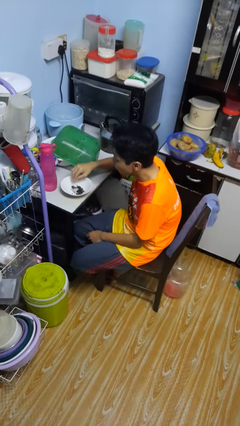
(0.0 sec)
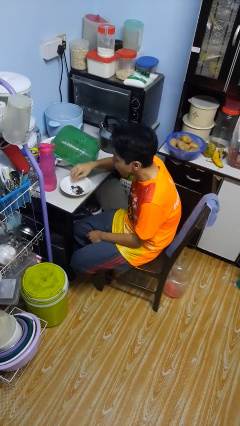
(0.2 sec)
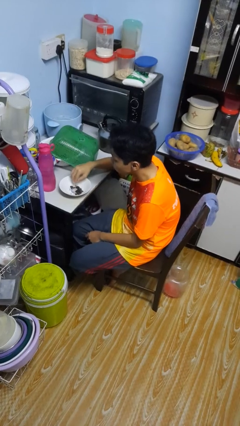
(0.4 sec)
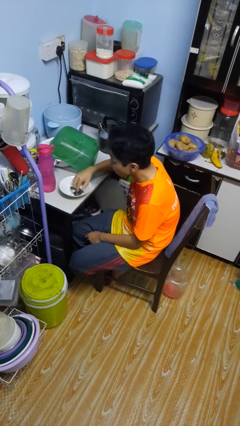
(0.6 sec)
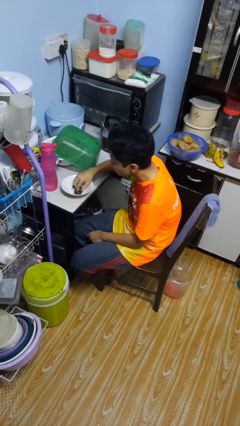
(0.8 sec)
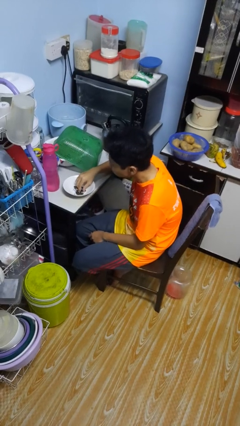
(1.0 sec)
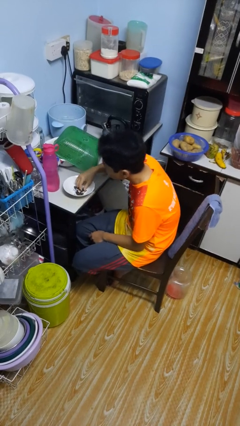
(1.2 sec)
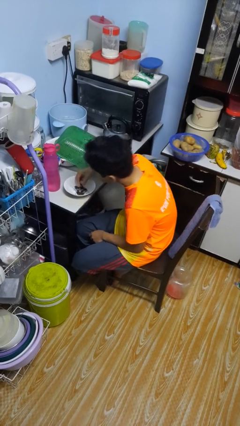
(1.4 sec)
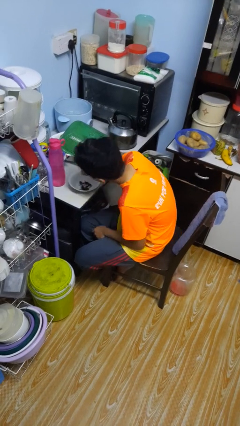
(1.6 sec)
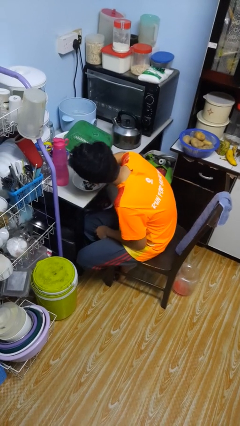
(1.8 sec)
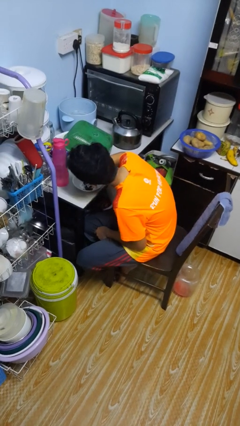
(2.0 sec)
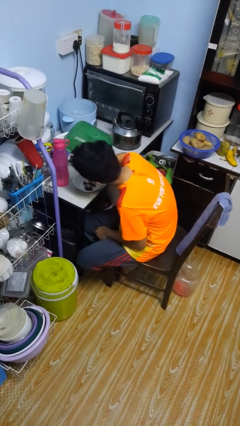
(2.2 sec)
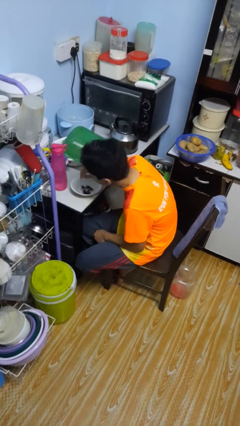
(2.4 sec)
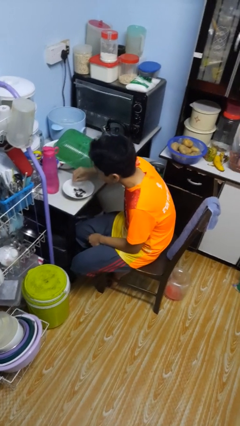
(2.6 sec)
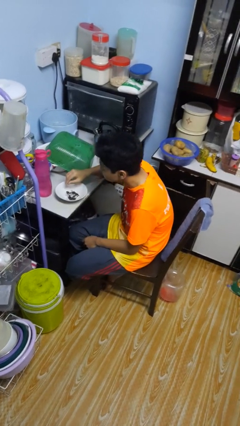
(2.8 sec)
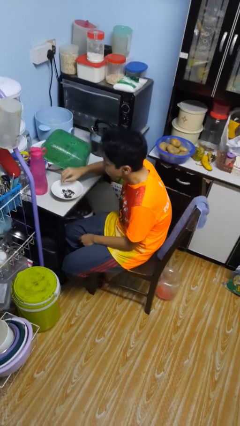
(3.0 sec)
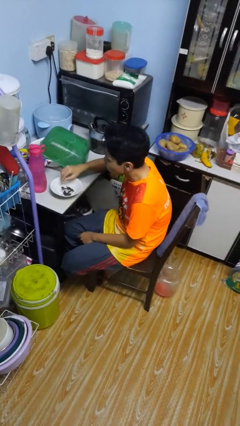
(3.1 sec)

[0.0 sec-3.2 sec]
person eats with hands

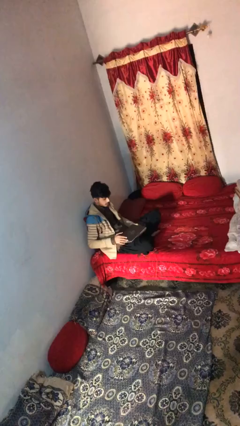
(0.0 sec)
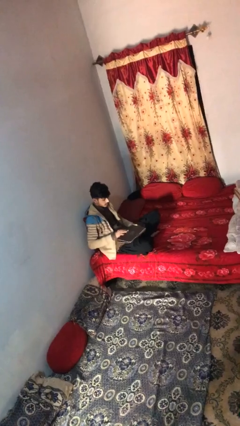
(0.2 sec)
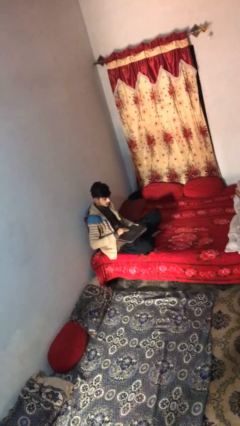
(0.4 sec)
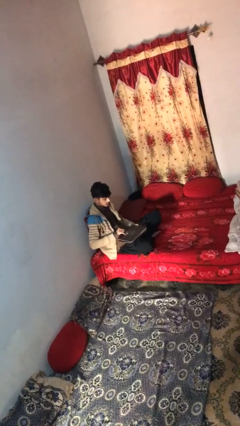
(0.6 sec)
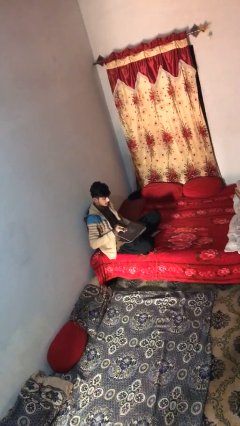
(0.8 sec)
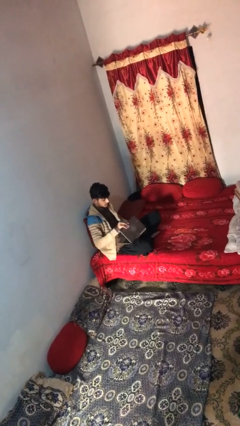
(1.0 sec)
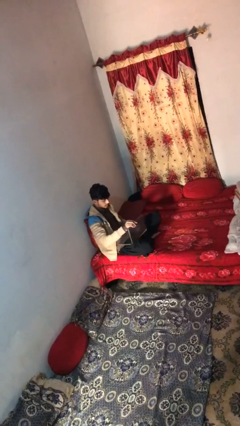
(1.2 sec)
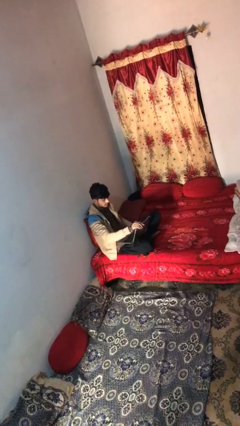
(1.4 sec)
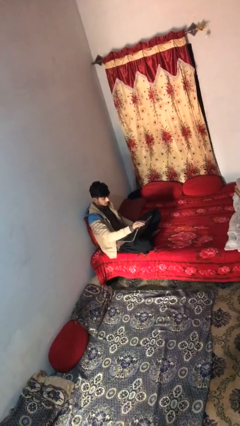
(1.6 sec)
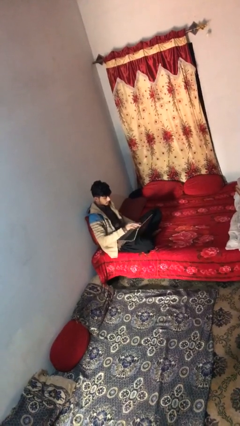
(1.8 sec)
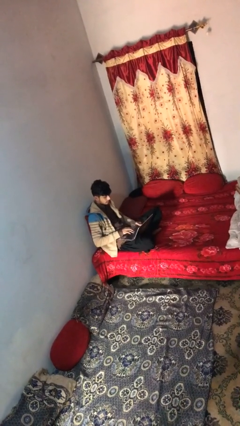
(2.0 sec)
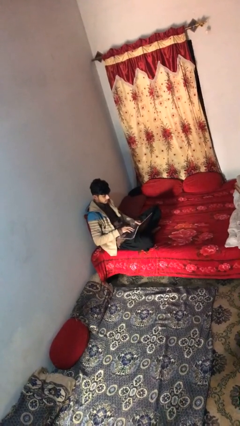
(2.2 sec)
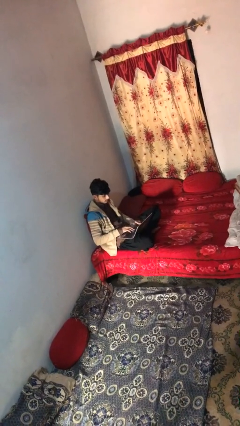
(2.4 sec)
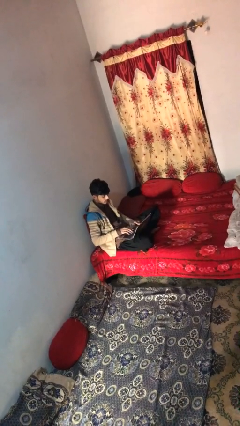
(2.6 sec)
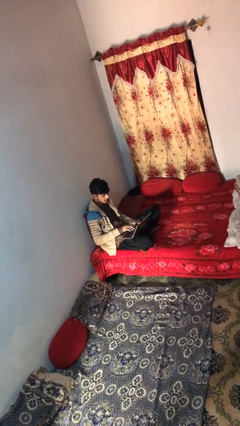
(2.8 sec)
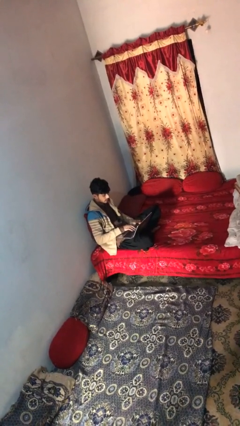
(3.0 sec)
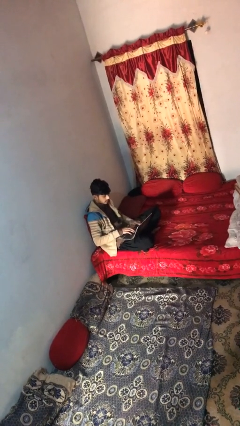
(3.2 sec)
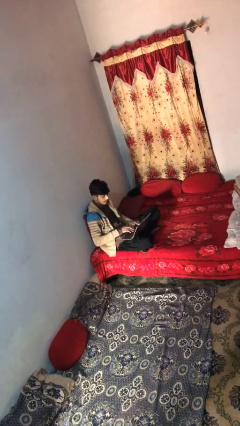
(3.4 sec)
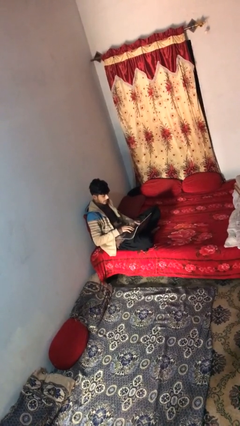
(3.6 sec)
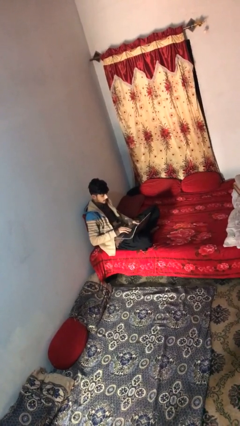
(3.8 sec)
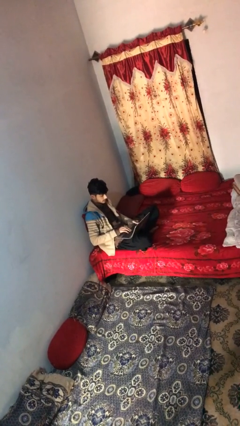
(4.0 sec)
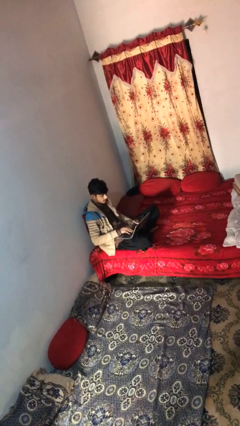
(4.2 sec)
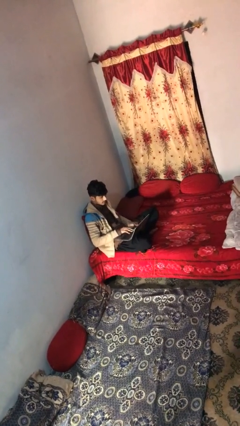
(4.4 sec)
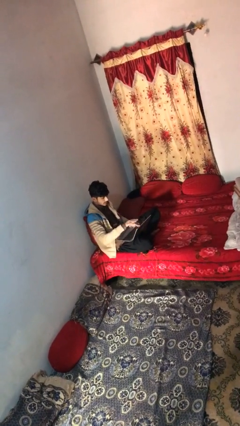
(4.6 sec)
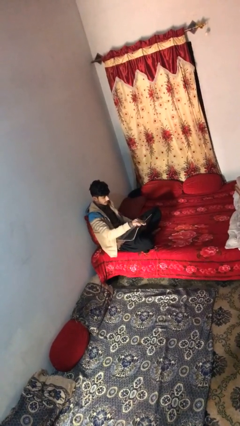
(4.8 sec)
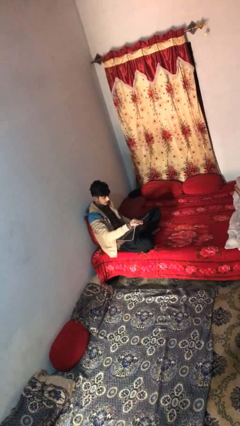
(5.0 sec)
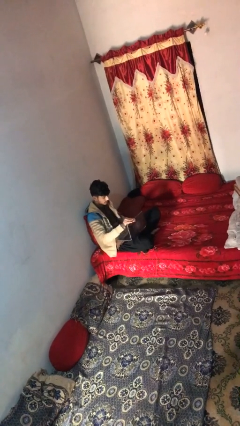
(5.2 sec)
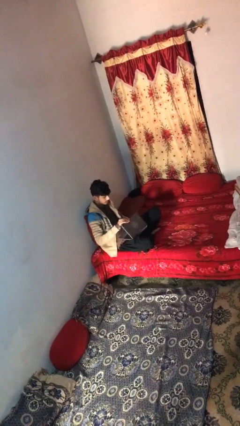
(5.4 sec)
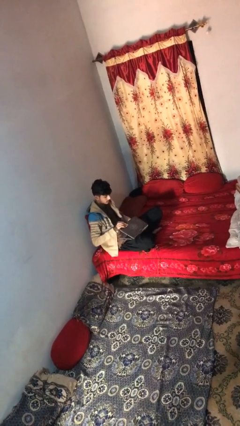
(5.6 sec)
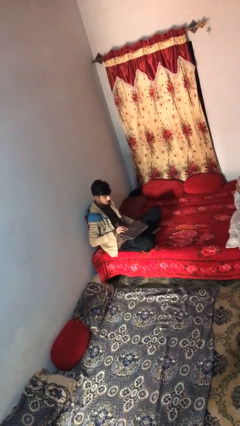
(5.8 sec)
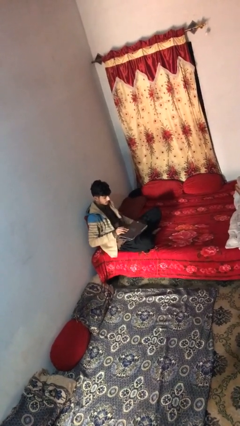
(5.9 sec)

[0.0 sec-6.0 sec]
person interacts with laptop

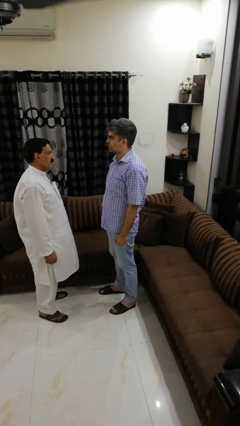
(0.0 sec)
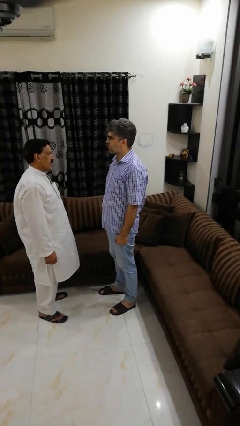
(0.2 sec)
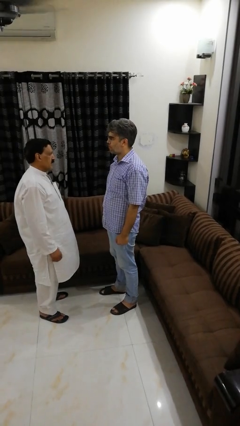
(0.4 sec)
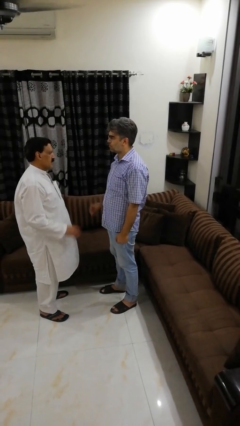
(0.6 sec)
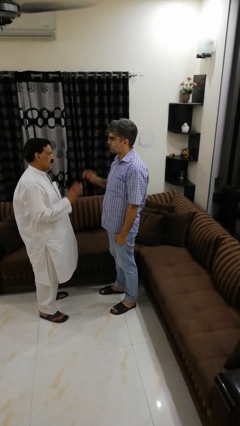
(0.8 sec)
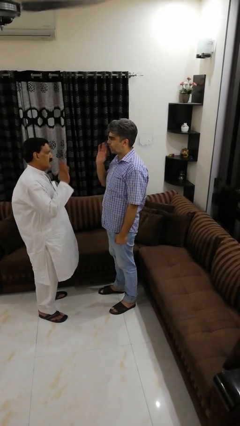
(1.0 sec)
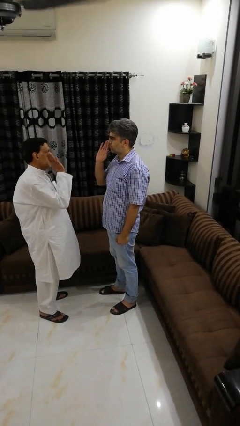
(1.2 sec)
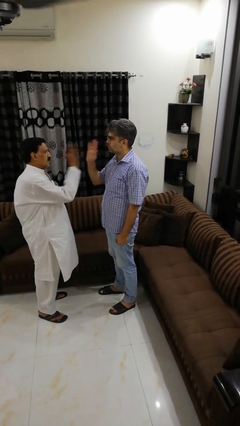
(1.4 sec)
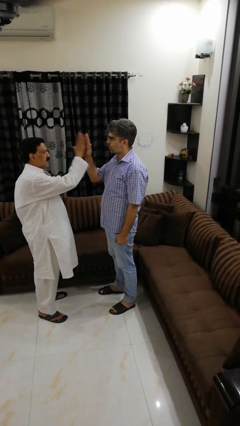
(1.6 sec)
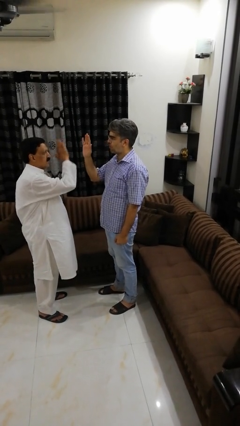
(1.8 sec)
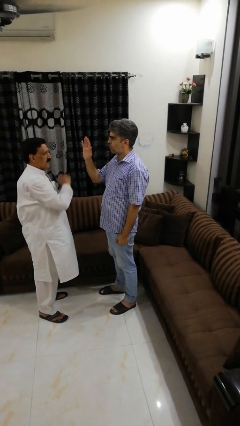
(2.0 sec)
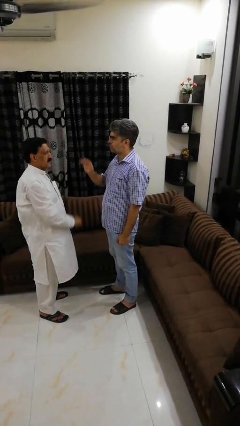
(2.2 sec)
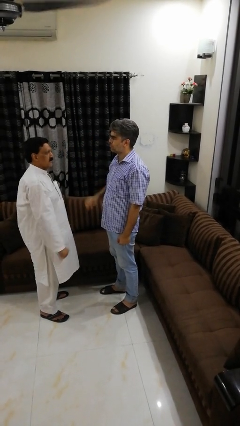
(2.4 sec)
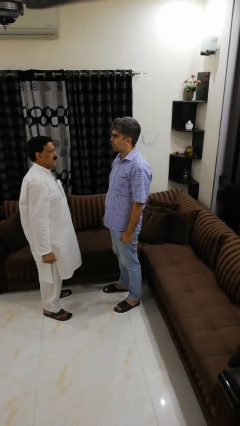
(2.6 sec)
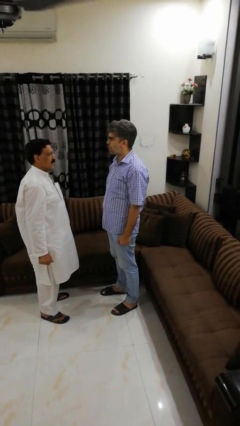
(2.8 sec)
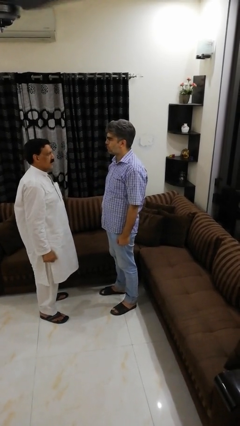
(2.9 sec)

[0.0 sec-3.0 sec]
person highfives hand

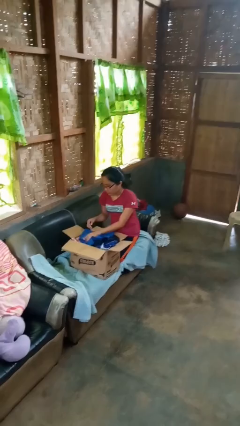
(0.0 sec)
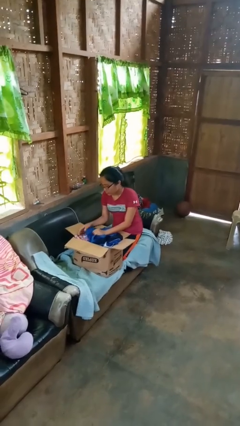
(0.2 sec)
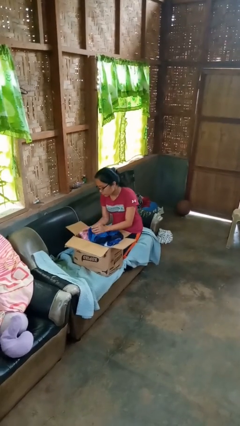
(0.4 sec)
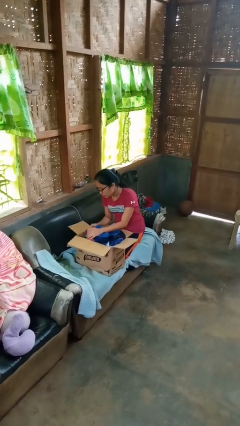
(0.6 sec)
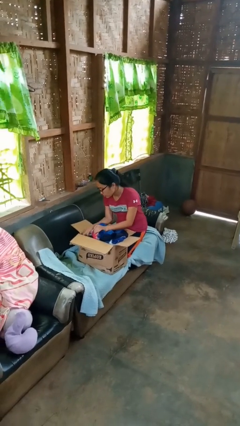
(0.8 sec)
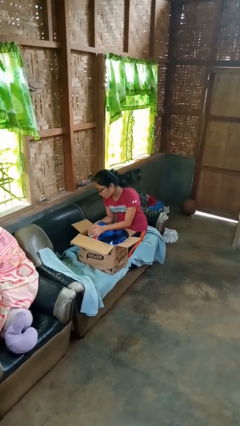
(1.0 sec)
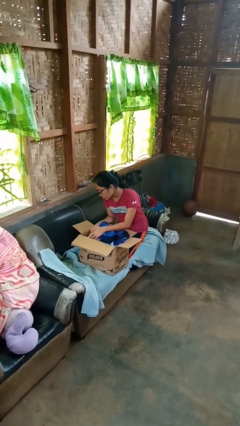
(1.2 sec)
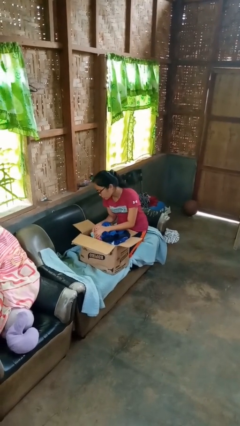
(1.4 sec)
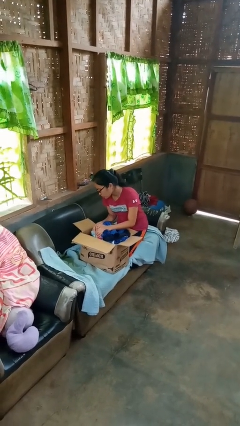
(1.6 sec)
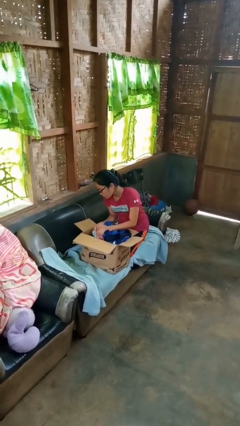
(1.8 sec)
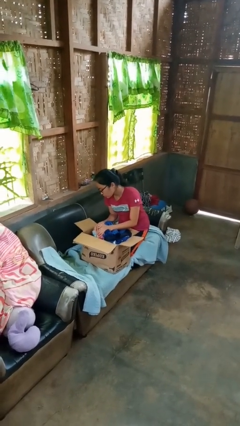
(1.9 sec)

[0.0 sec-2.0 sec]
person searches in box

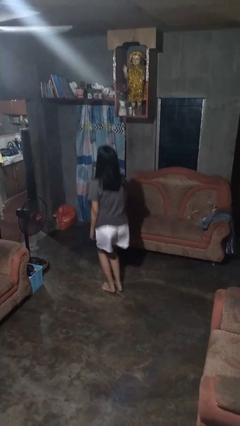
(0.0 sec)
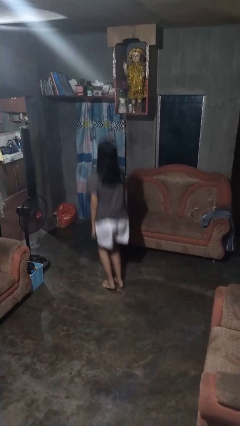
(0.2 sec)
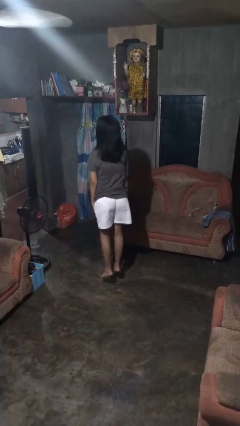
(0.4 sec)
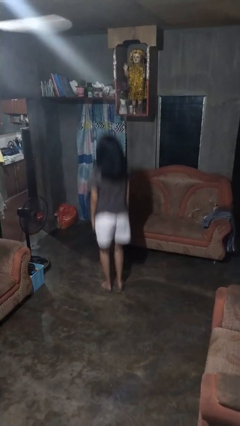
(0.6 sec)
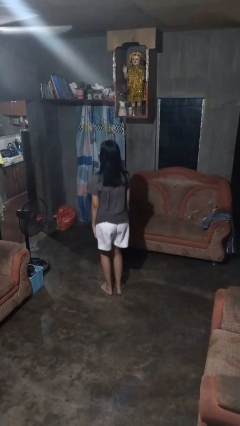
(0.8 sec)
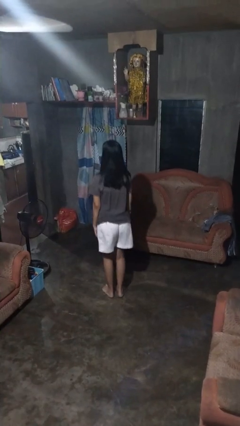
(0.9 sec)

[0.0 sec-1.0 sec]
person jumps

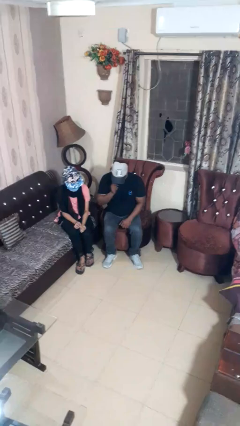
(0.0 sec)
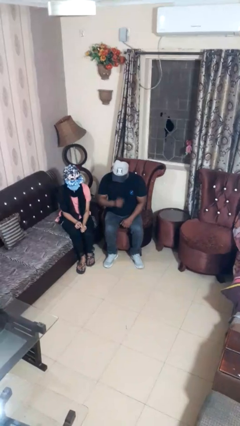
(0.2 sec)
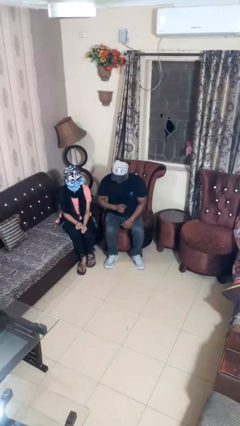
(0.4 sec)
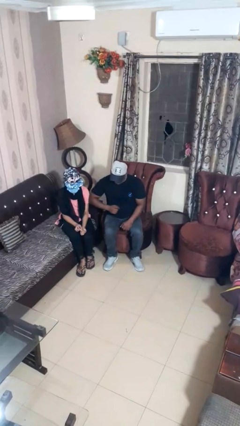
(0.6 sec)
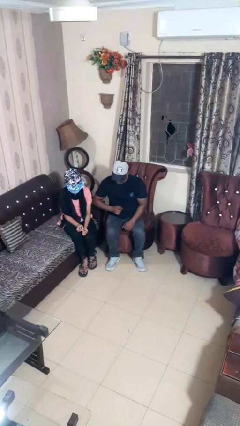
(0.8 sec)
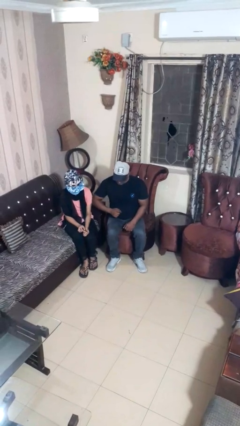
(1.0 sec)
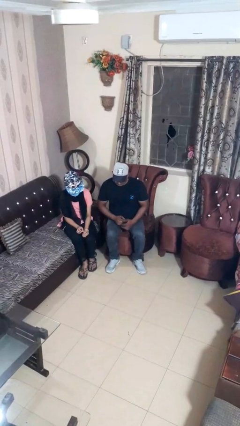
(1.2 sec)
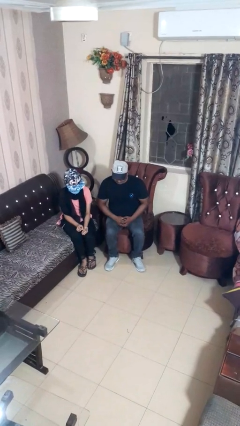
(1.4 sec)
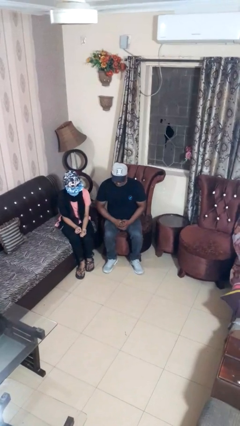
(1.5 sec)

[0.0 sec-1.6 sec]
person nudges person with elbow

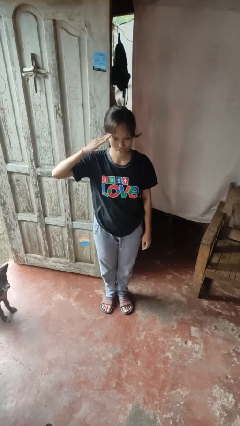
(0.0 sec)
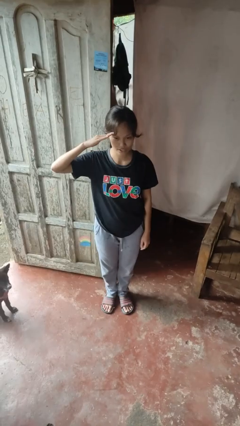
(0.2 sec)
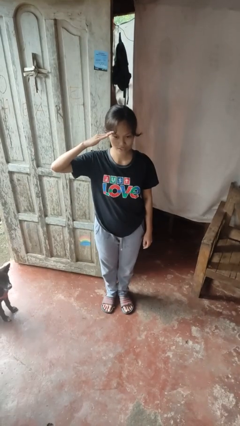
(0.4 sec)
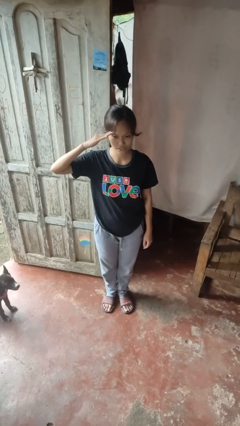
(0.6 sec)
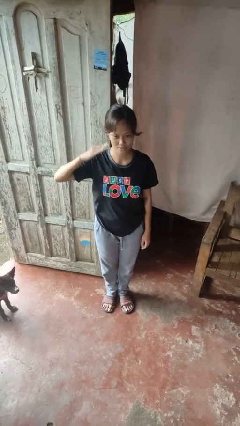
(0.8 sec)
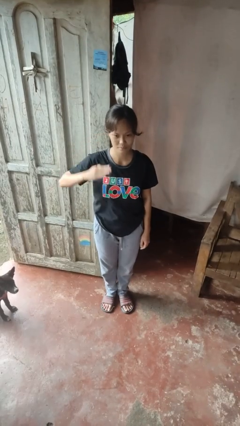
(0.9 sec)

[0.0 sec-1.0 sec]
person salutes
